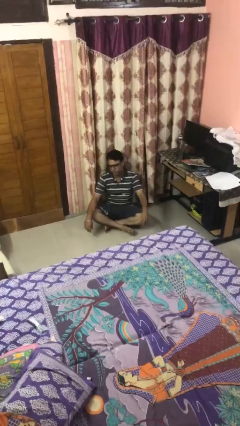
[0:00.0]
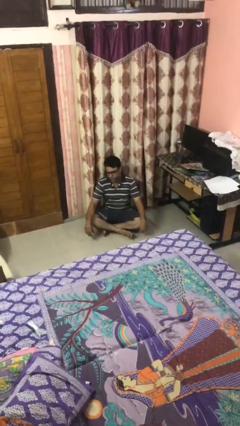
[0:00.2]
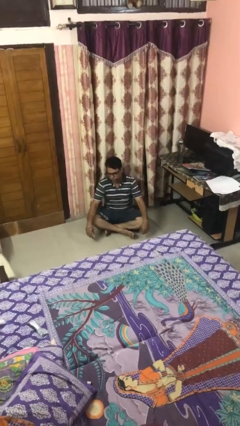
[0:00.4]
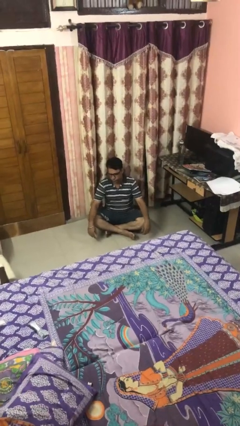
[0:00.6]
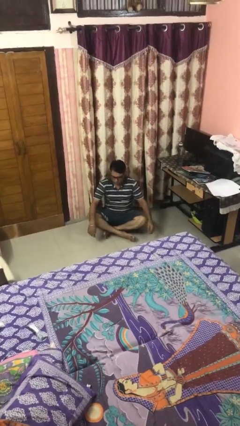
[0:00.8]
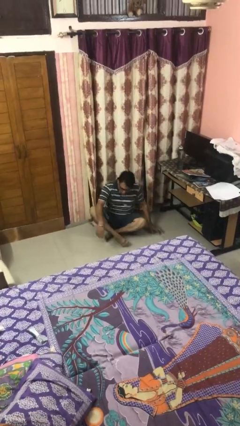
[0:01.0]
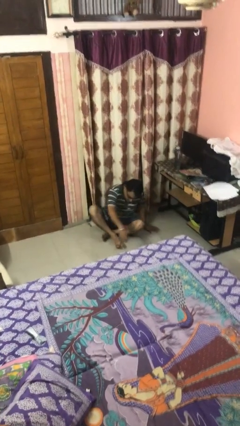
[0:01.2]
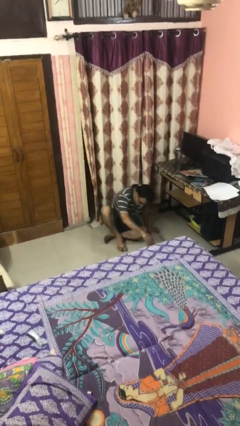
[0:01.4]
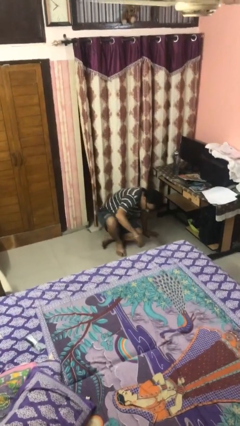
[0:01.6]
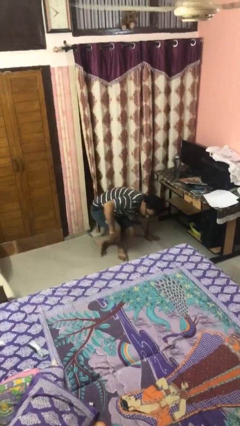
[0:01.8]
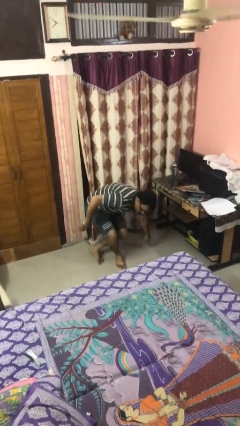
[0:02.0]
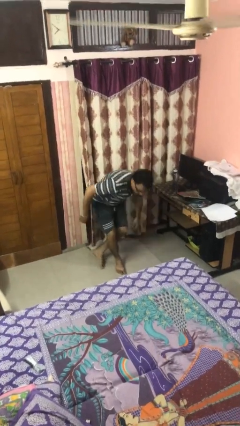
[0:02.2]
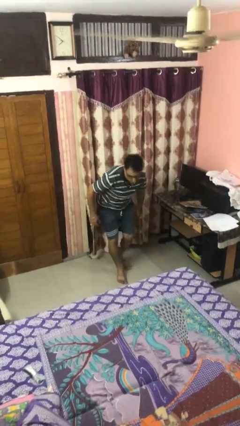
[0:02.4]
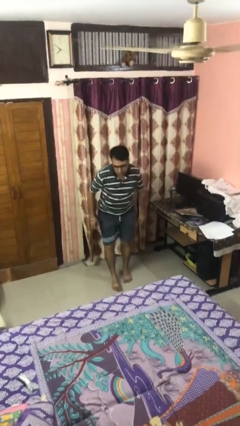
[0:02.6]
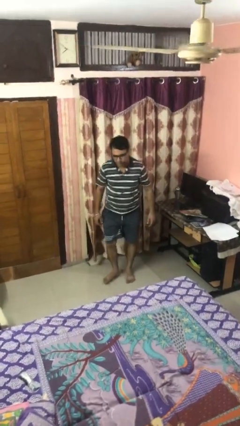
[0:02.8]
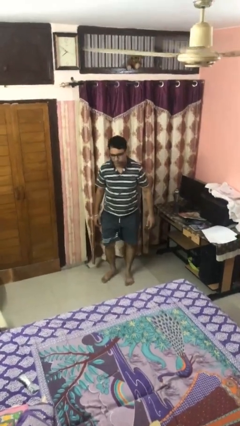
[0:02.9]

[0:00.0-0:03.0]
person stands up from floor

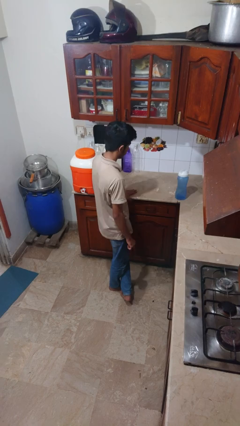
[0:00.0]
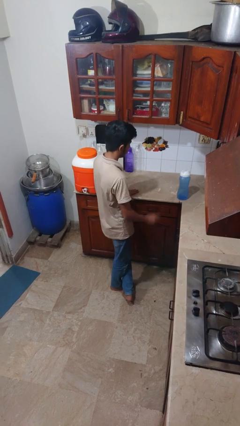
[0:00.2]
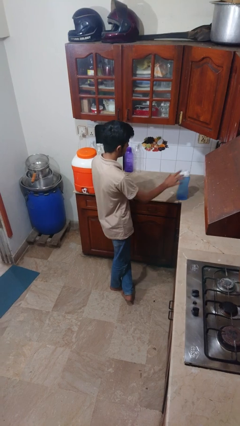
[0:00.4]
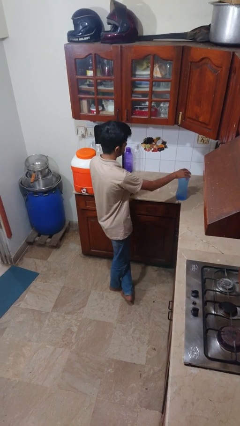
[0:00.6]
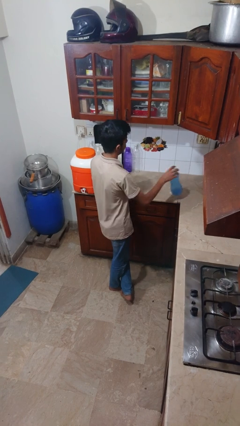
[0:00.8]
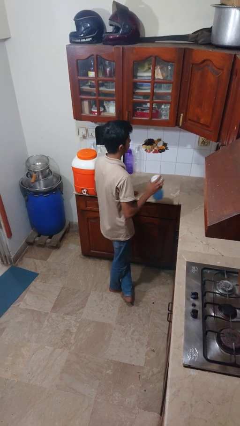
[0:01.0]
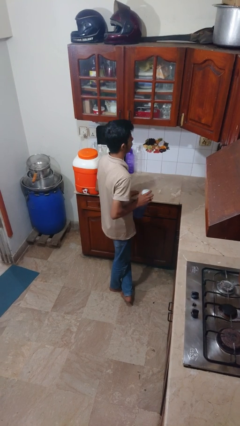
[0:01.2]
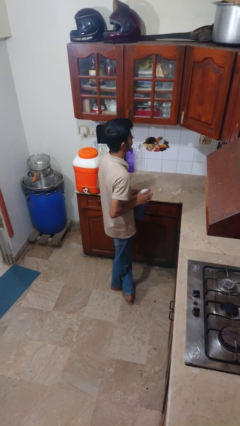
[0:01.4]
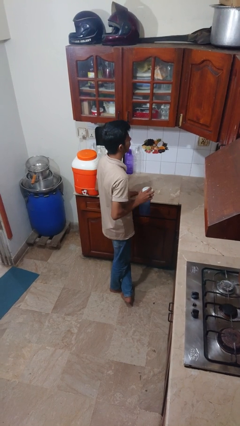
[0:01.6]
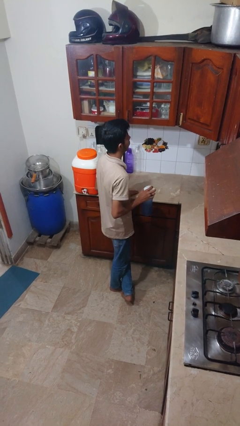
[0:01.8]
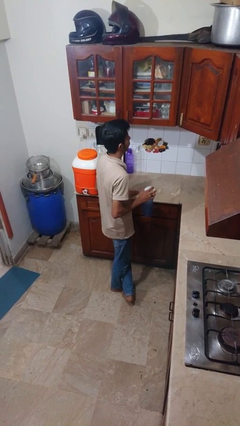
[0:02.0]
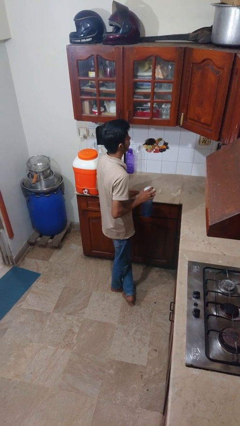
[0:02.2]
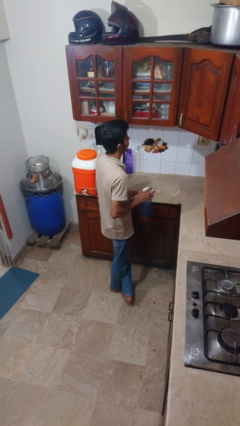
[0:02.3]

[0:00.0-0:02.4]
person picks up object from countertop

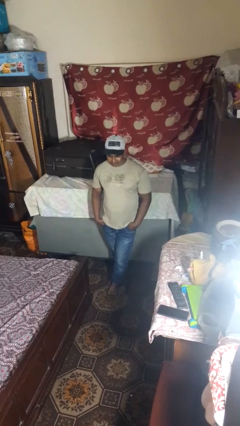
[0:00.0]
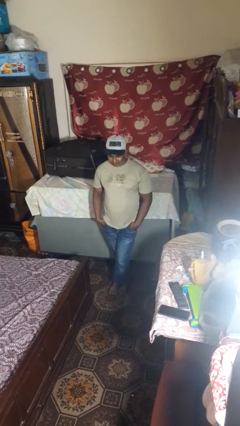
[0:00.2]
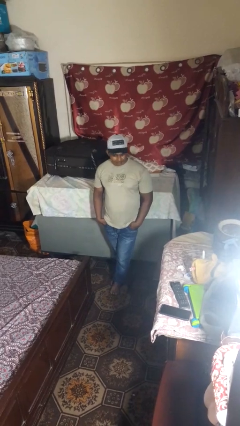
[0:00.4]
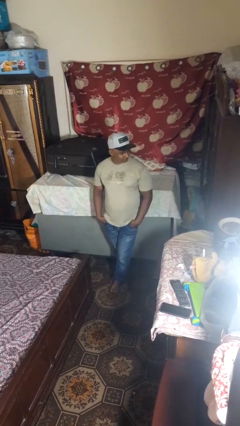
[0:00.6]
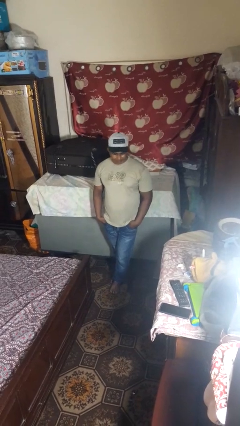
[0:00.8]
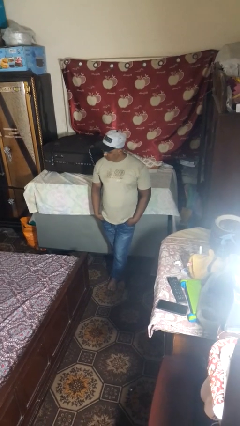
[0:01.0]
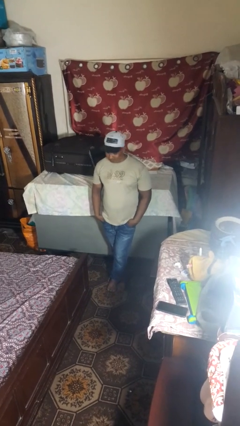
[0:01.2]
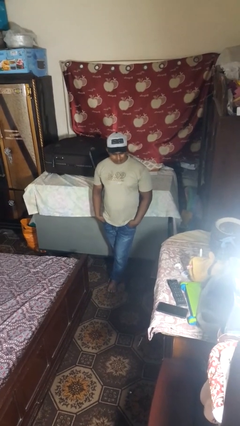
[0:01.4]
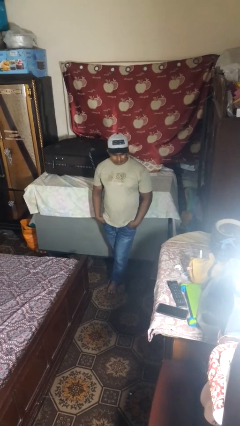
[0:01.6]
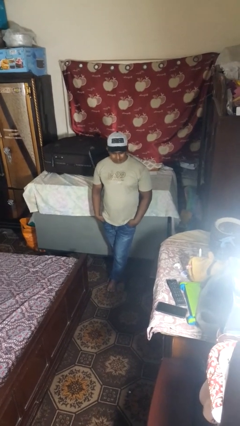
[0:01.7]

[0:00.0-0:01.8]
person shakes head

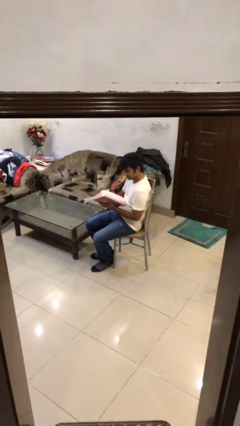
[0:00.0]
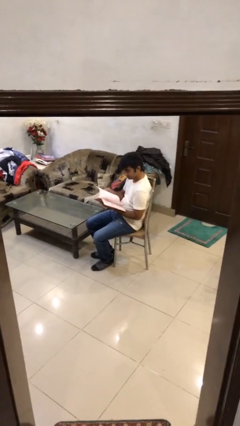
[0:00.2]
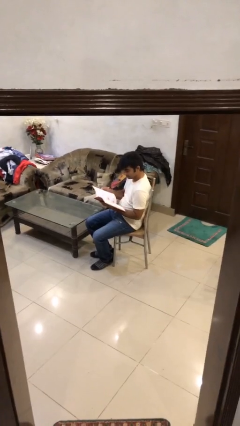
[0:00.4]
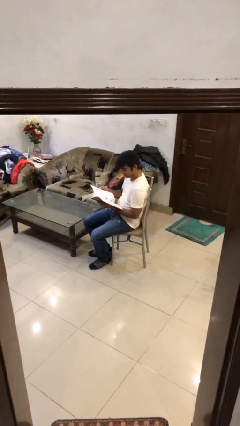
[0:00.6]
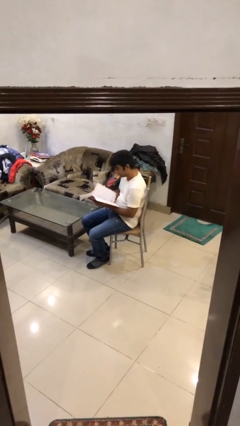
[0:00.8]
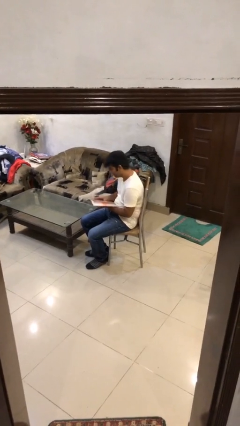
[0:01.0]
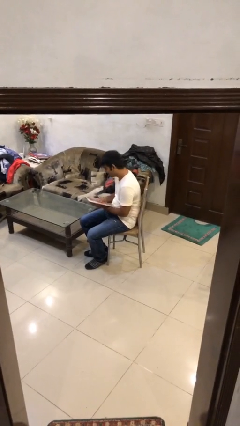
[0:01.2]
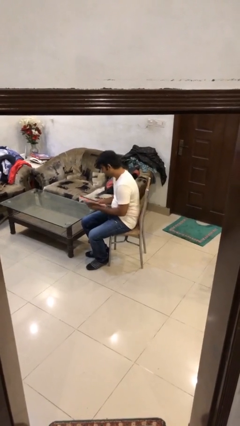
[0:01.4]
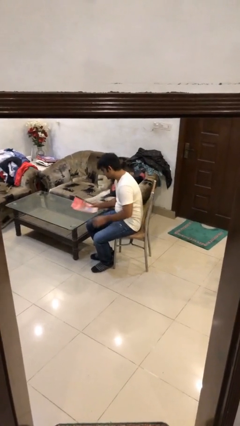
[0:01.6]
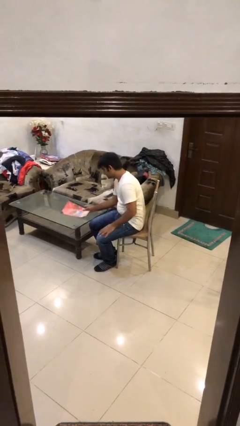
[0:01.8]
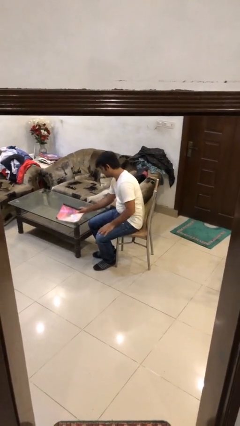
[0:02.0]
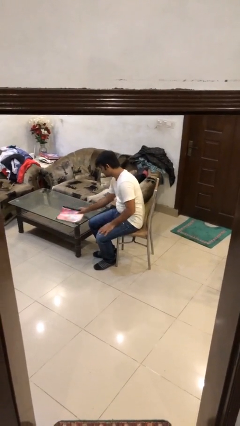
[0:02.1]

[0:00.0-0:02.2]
person puts down object on table

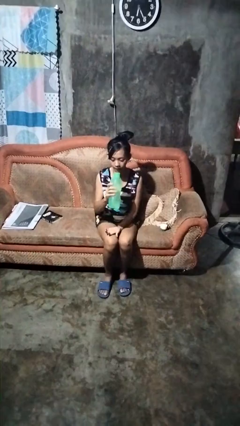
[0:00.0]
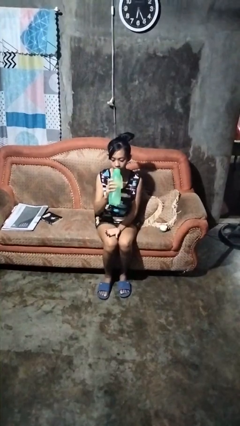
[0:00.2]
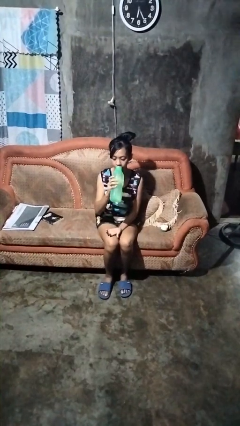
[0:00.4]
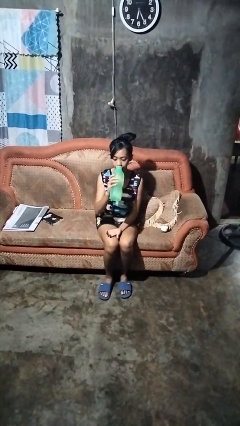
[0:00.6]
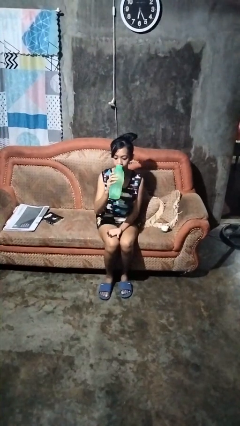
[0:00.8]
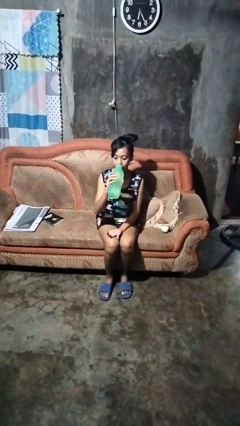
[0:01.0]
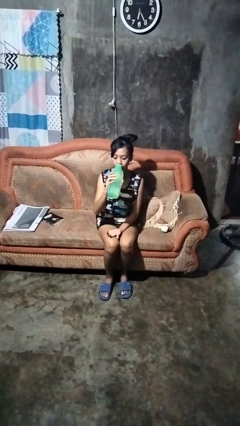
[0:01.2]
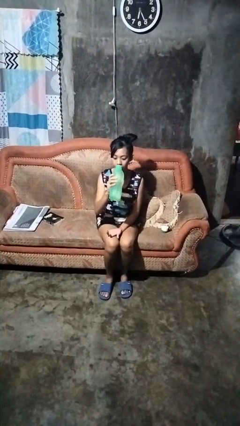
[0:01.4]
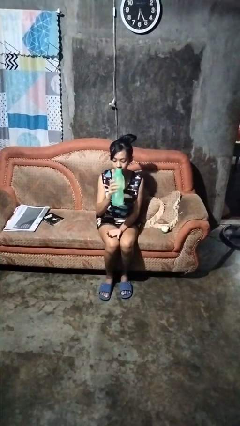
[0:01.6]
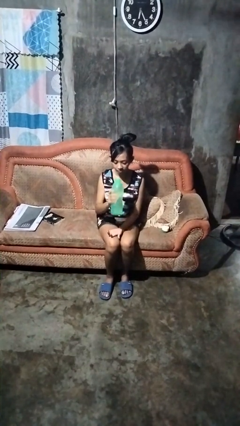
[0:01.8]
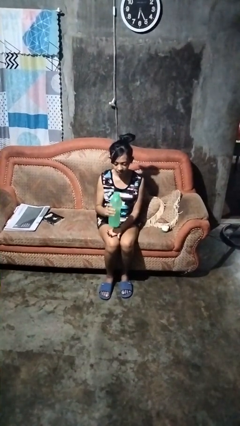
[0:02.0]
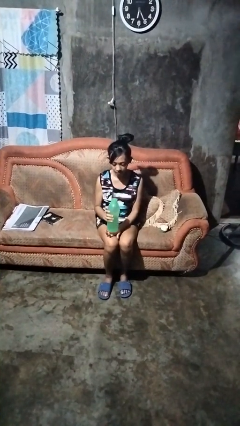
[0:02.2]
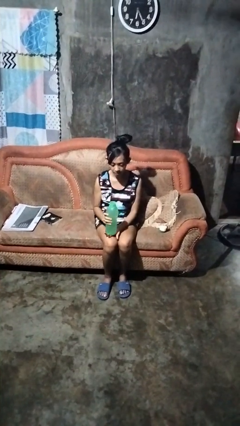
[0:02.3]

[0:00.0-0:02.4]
person drinks from bottle

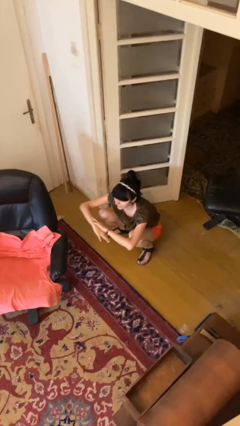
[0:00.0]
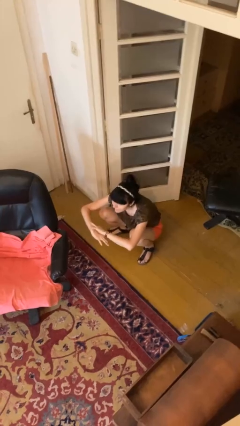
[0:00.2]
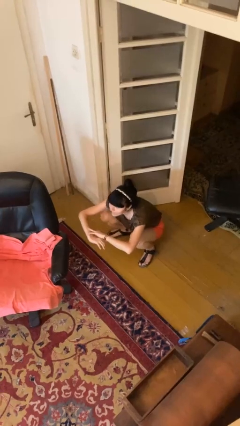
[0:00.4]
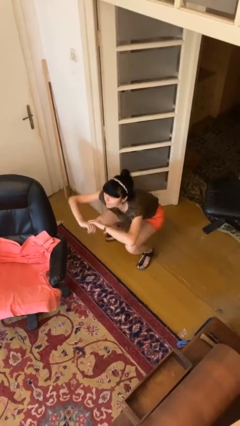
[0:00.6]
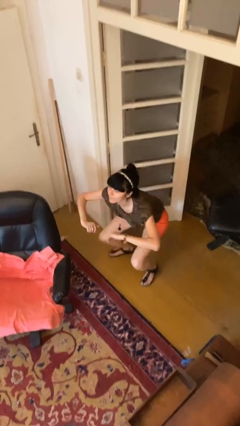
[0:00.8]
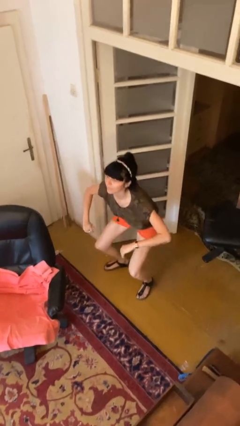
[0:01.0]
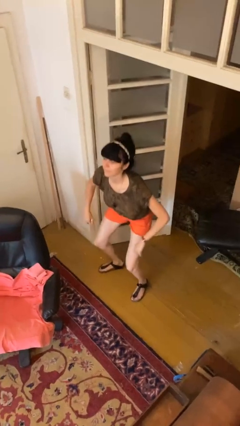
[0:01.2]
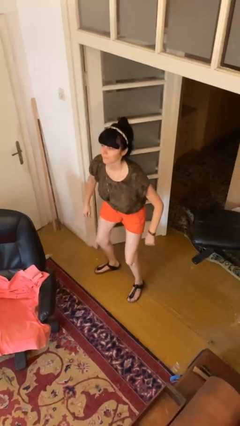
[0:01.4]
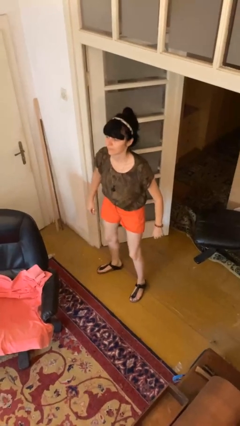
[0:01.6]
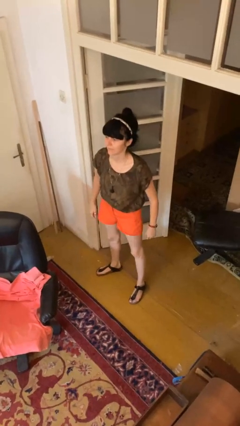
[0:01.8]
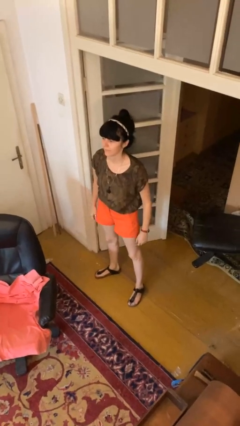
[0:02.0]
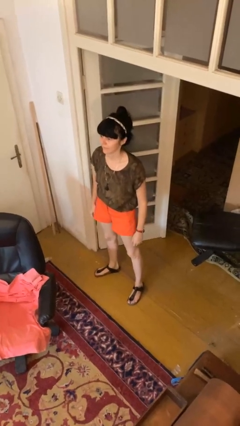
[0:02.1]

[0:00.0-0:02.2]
person stands up

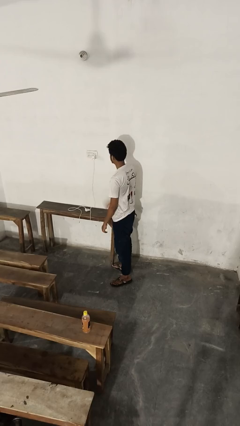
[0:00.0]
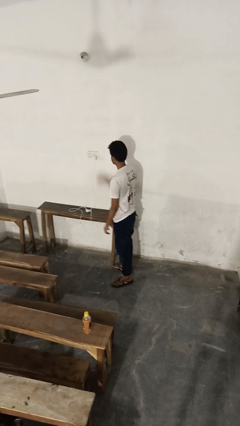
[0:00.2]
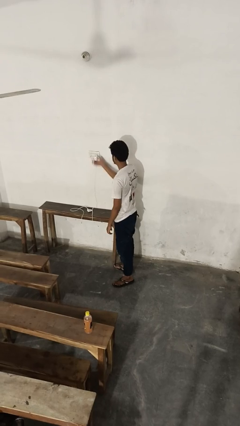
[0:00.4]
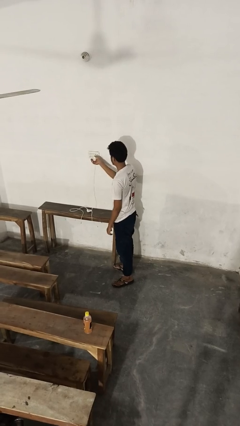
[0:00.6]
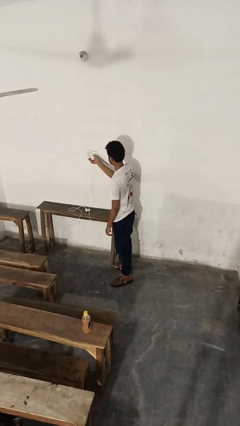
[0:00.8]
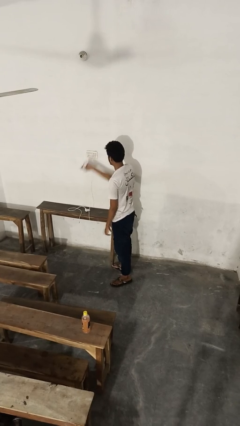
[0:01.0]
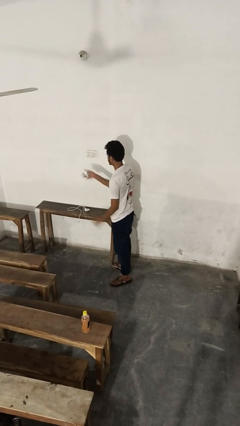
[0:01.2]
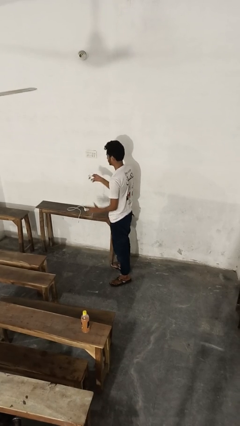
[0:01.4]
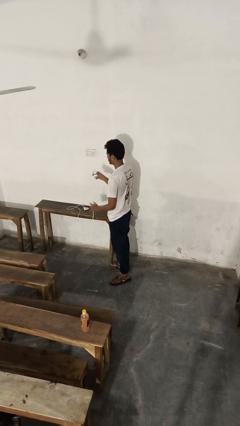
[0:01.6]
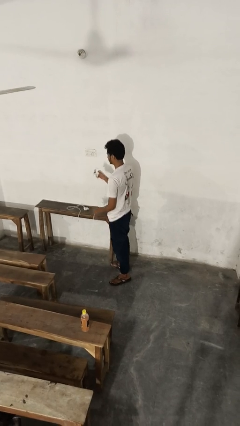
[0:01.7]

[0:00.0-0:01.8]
person unplugs from electrical socket

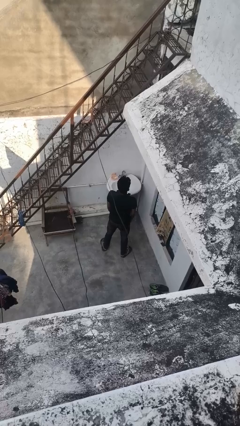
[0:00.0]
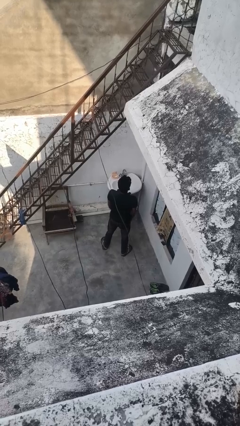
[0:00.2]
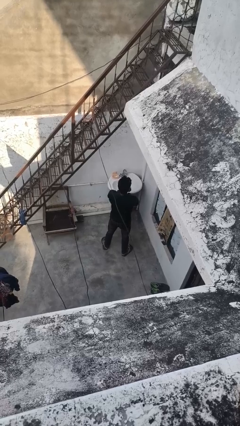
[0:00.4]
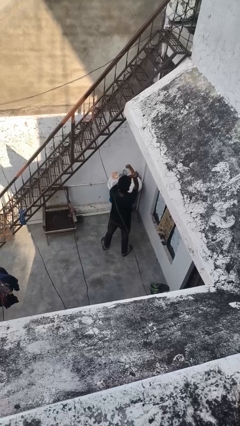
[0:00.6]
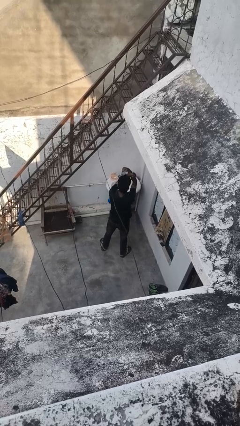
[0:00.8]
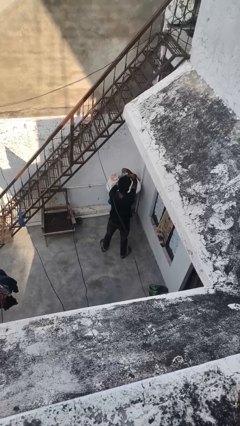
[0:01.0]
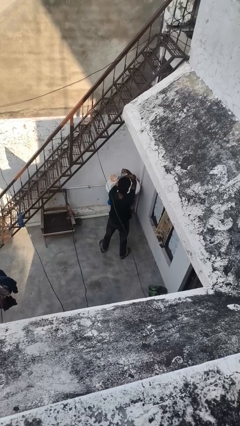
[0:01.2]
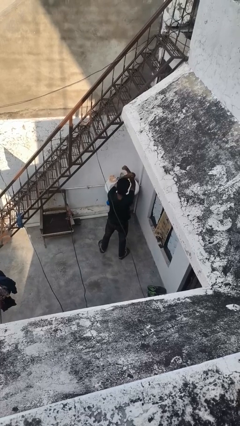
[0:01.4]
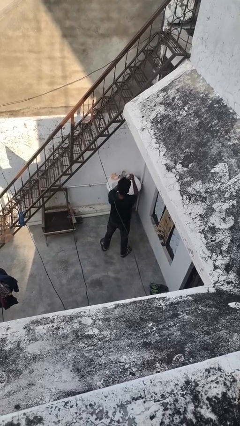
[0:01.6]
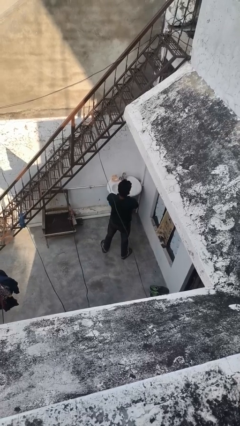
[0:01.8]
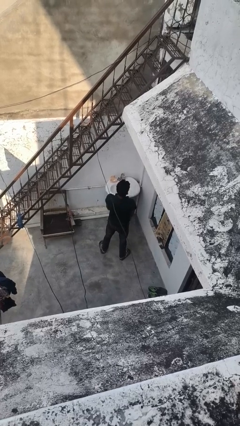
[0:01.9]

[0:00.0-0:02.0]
person gestures arms x
